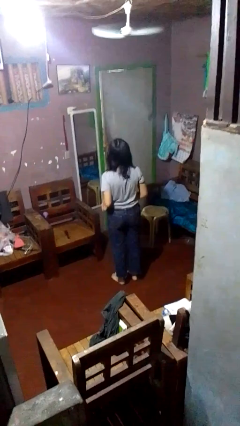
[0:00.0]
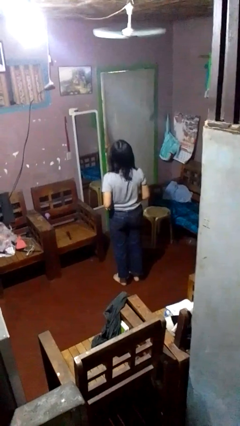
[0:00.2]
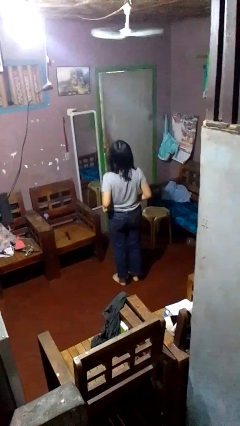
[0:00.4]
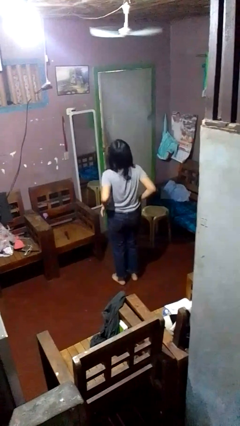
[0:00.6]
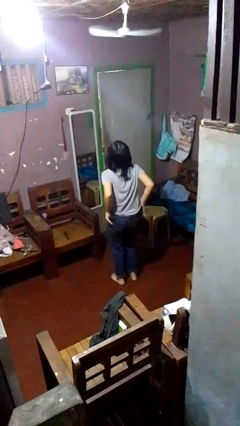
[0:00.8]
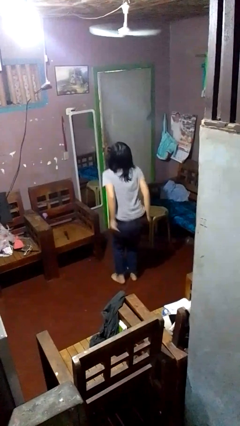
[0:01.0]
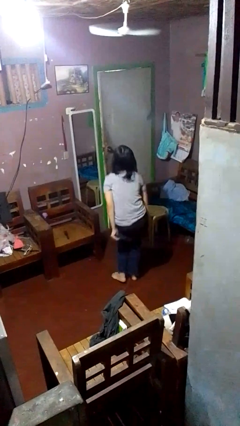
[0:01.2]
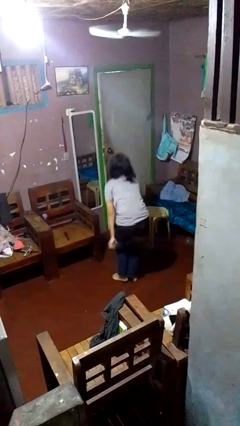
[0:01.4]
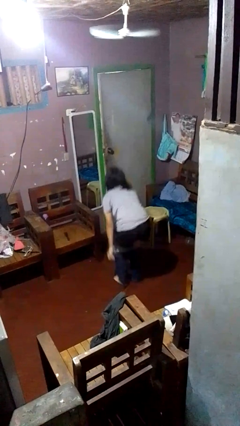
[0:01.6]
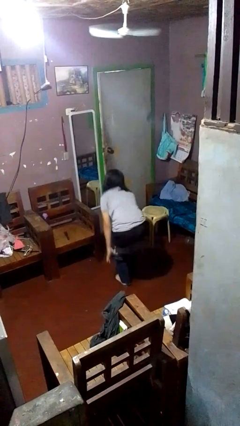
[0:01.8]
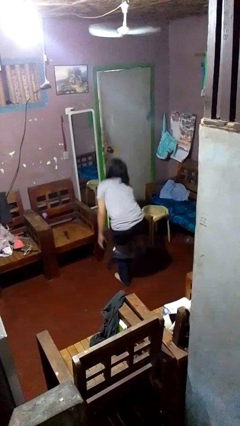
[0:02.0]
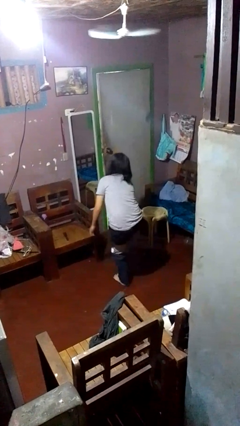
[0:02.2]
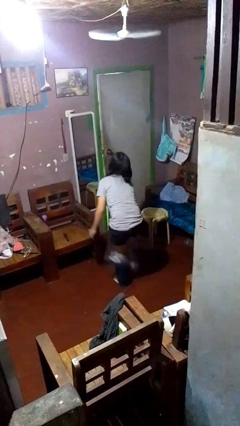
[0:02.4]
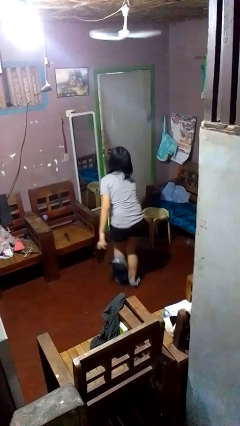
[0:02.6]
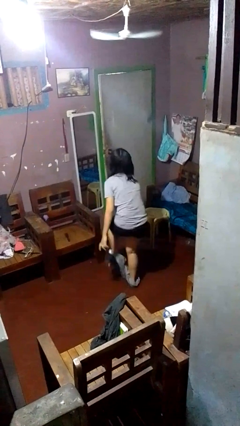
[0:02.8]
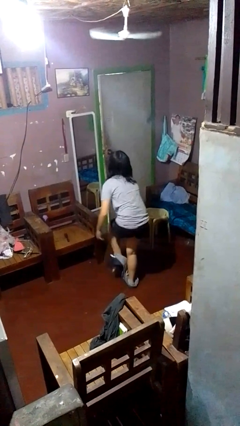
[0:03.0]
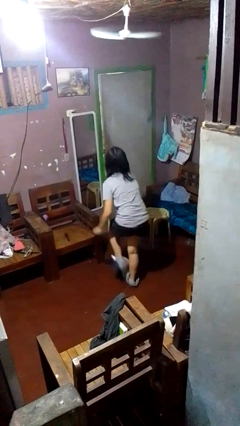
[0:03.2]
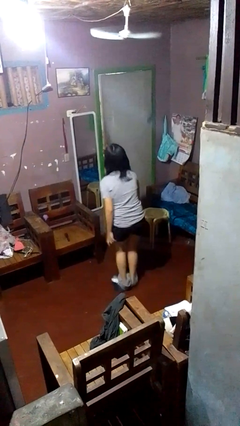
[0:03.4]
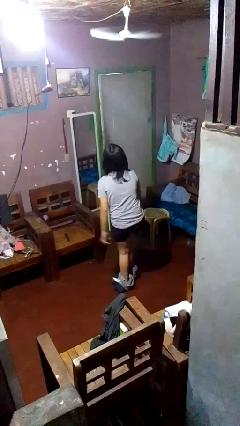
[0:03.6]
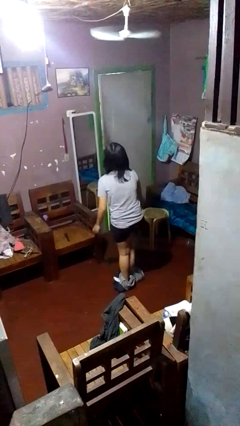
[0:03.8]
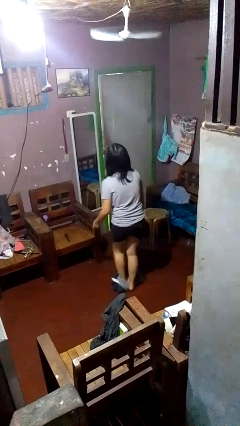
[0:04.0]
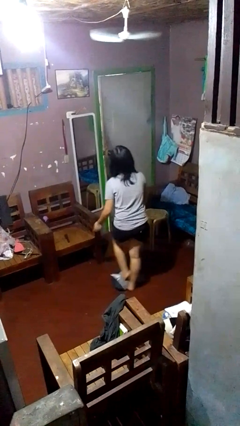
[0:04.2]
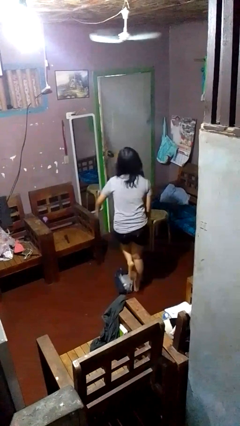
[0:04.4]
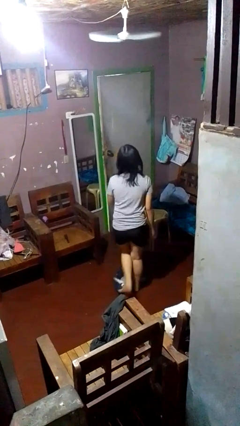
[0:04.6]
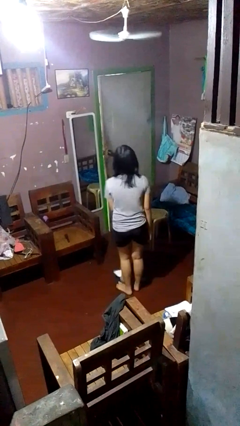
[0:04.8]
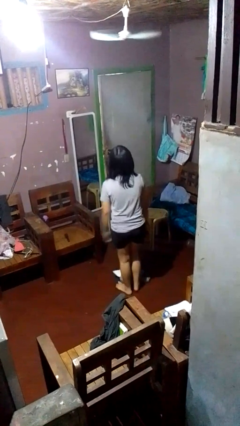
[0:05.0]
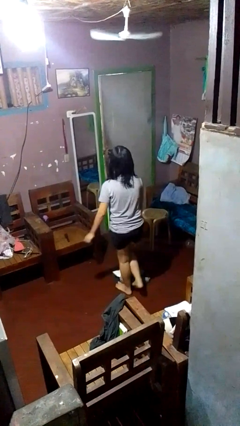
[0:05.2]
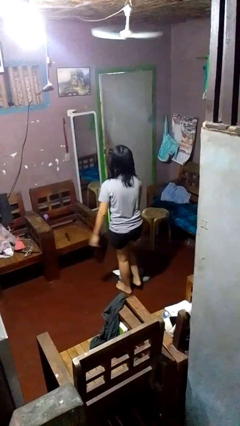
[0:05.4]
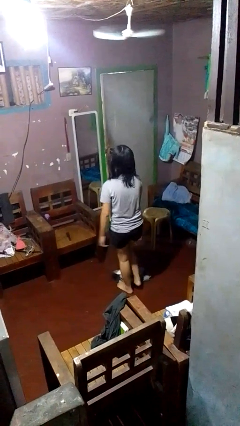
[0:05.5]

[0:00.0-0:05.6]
person takes off pants

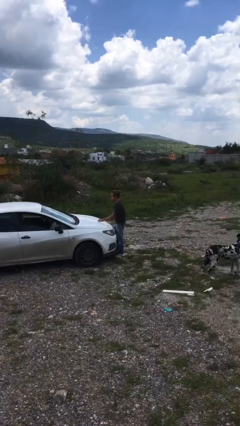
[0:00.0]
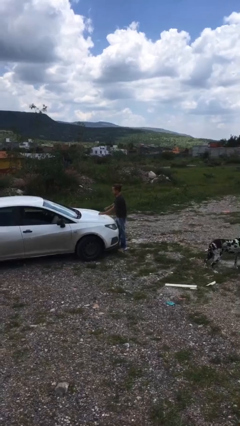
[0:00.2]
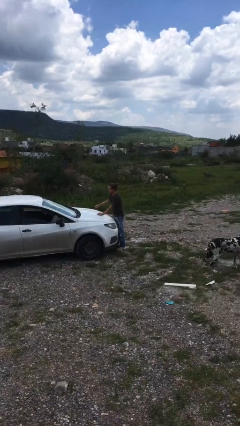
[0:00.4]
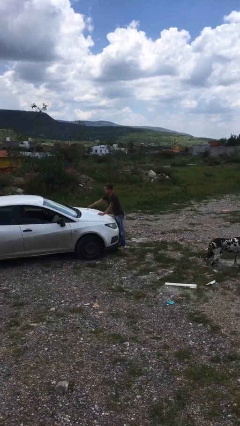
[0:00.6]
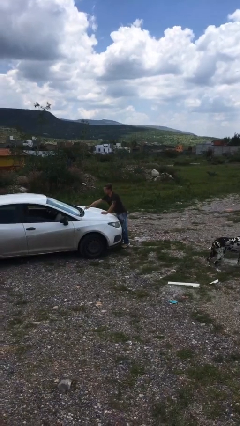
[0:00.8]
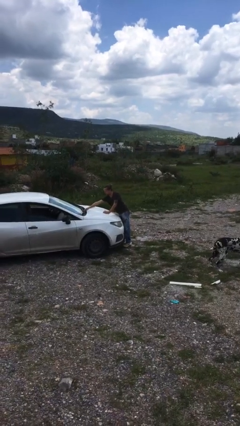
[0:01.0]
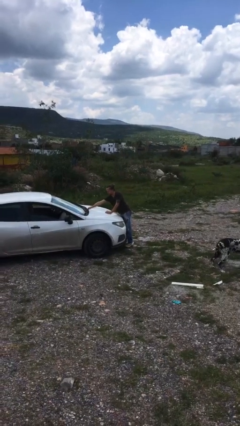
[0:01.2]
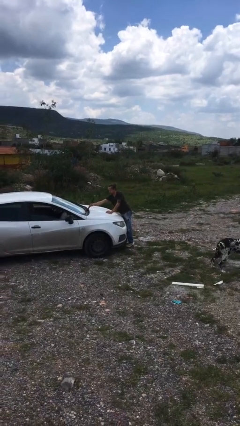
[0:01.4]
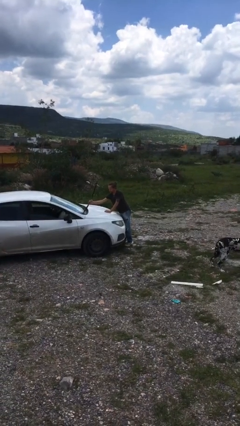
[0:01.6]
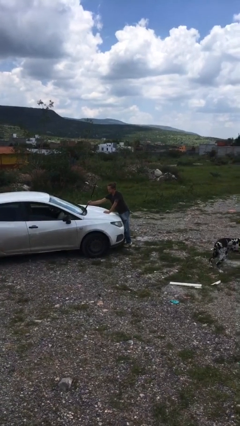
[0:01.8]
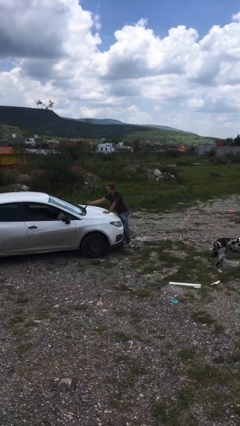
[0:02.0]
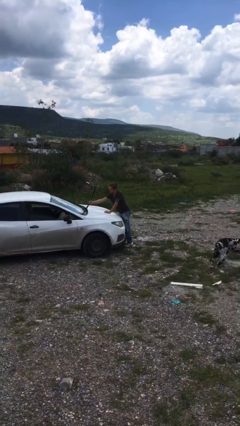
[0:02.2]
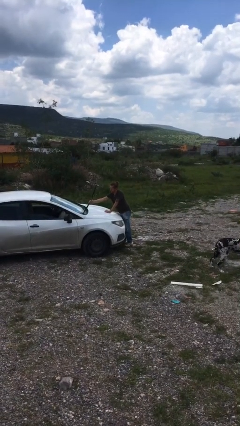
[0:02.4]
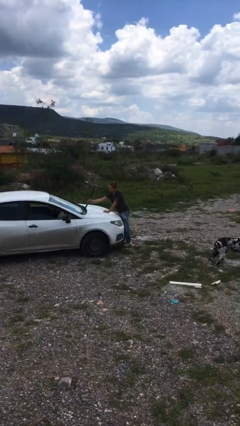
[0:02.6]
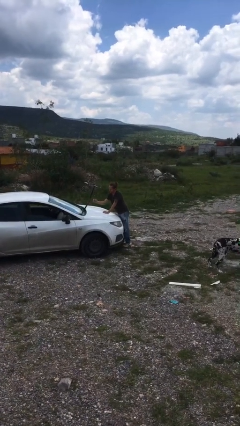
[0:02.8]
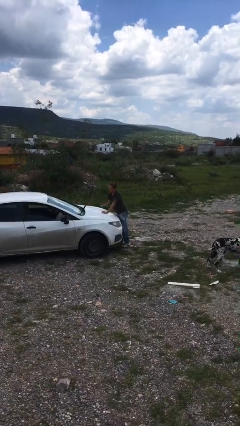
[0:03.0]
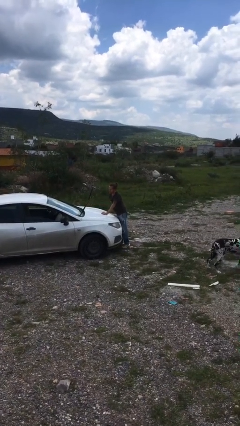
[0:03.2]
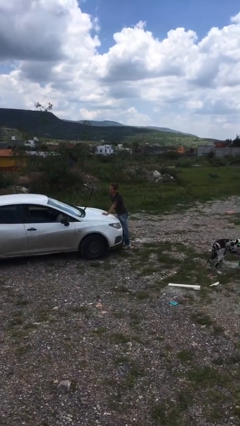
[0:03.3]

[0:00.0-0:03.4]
person flips up car wipers

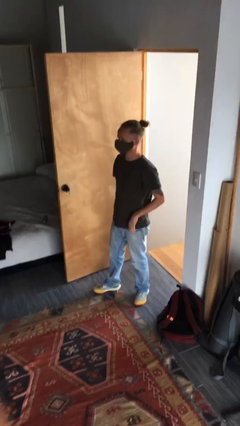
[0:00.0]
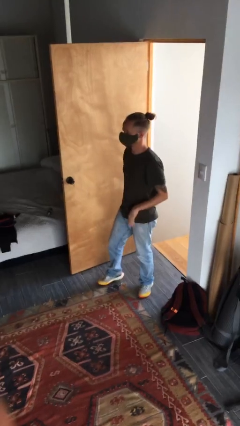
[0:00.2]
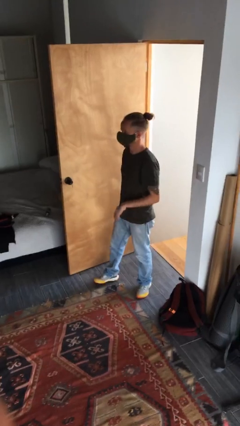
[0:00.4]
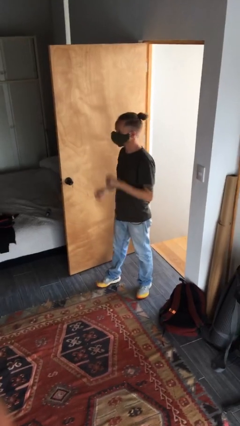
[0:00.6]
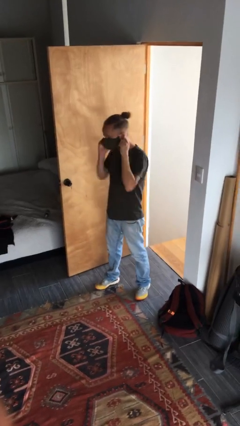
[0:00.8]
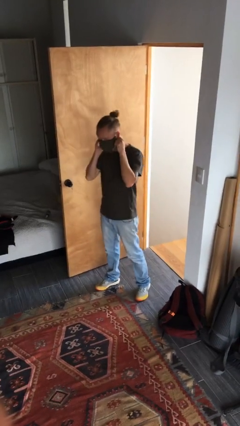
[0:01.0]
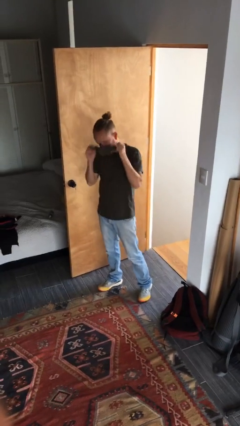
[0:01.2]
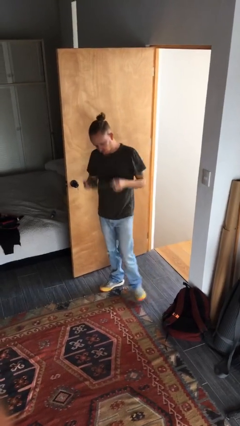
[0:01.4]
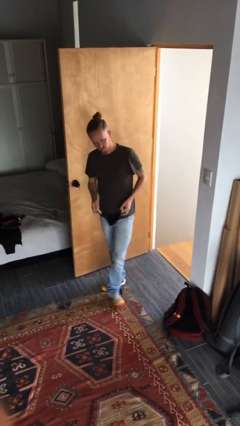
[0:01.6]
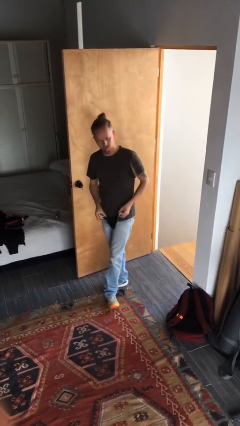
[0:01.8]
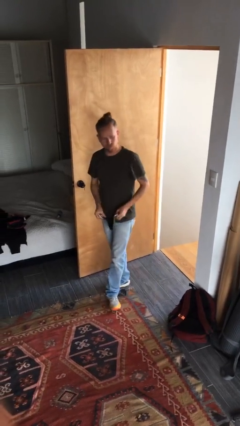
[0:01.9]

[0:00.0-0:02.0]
person takes off facemask

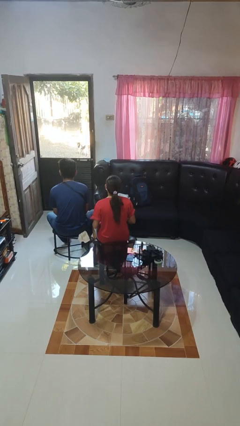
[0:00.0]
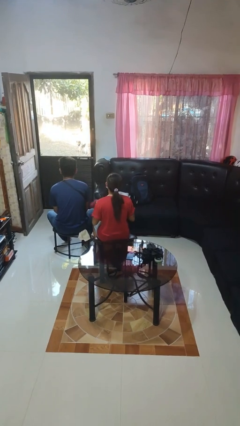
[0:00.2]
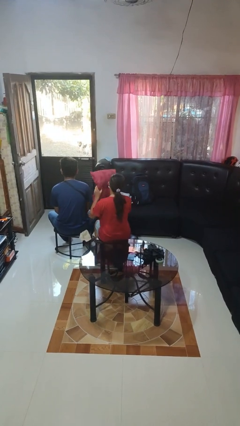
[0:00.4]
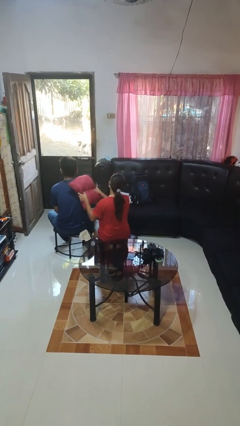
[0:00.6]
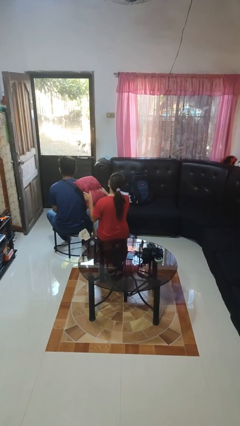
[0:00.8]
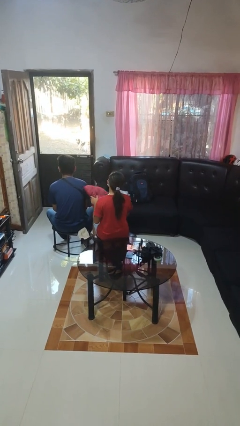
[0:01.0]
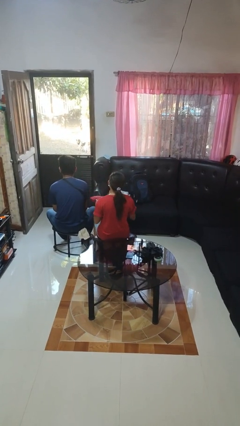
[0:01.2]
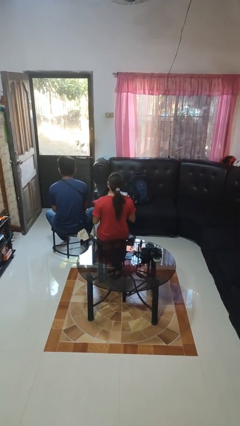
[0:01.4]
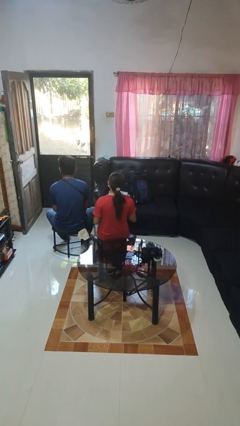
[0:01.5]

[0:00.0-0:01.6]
person hits person with pillow

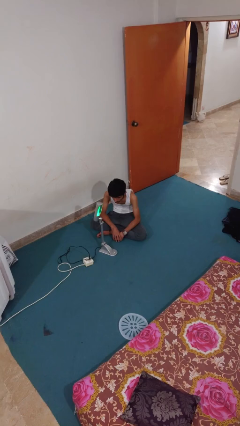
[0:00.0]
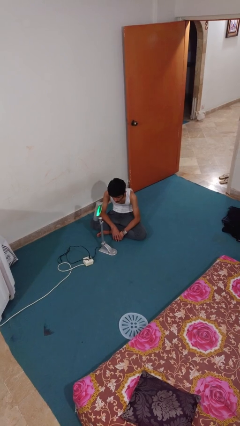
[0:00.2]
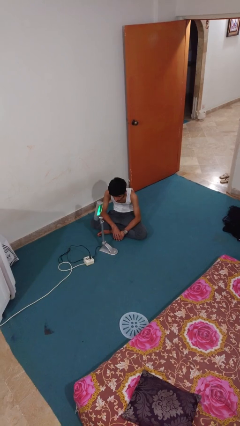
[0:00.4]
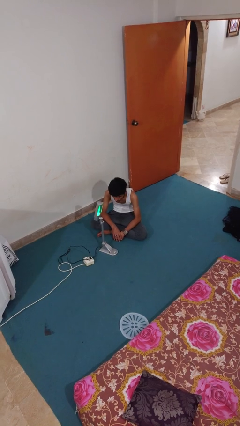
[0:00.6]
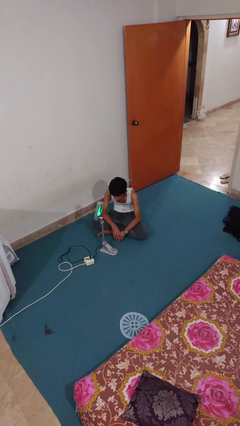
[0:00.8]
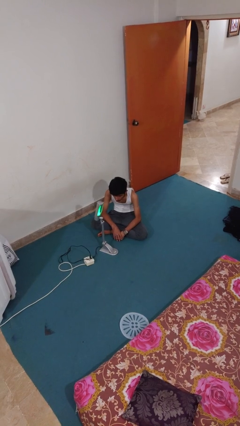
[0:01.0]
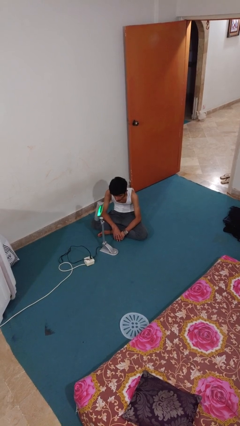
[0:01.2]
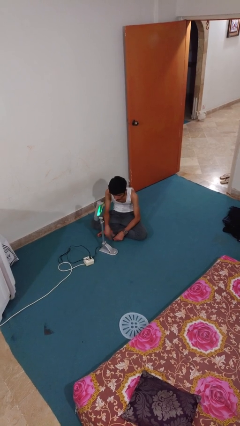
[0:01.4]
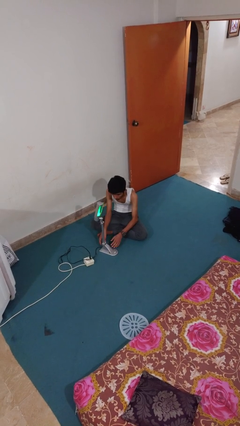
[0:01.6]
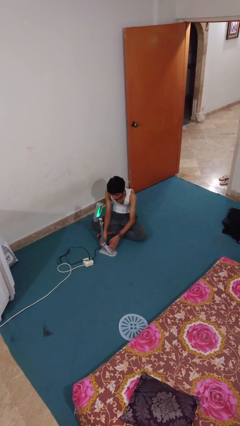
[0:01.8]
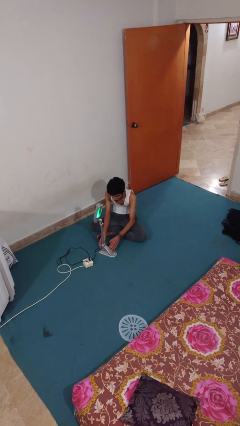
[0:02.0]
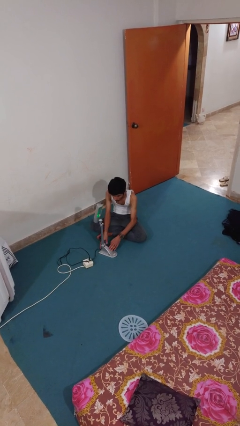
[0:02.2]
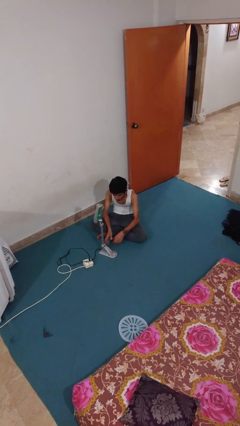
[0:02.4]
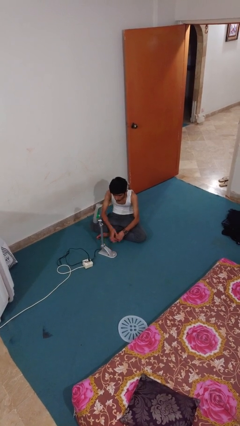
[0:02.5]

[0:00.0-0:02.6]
person turns off lamp

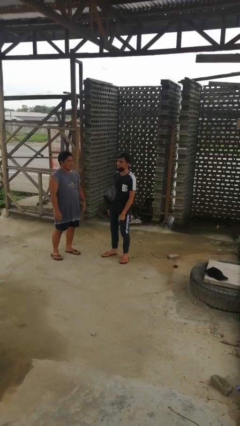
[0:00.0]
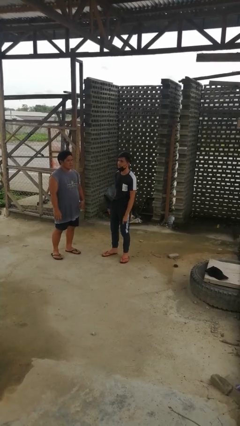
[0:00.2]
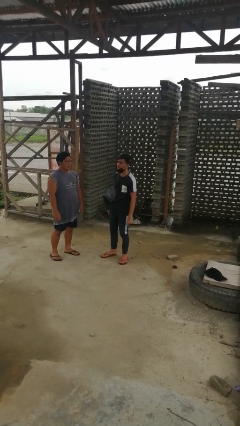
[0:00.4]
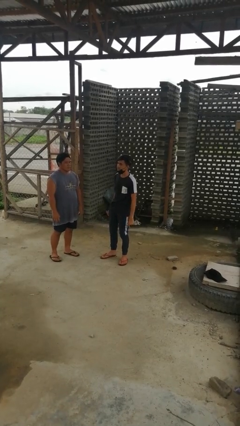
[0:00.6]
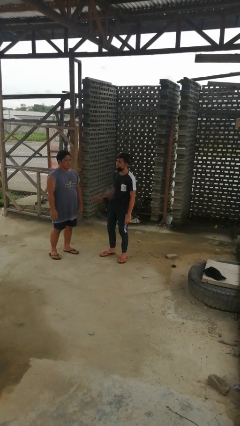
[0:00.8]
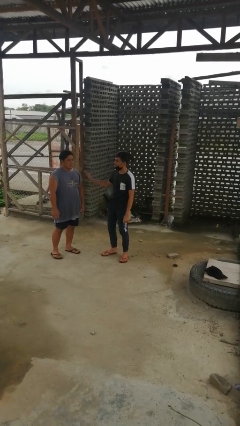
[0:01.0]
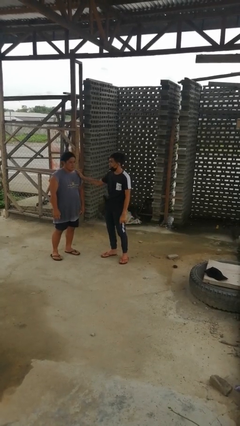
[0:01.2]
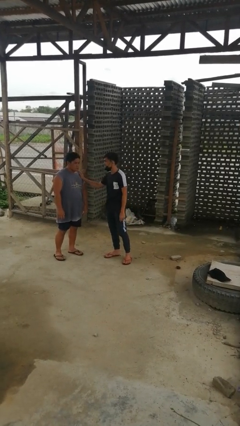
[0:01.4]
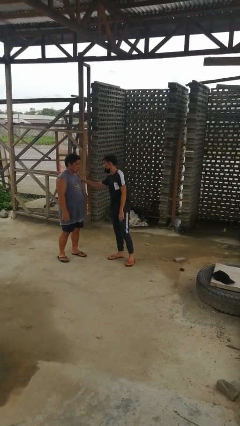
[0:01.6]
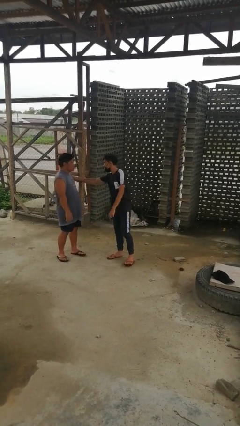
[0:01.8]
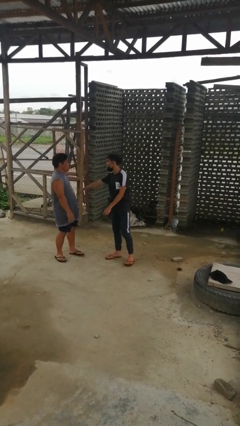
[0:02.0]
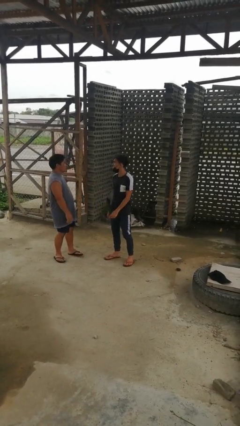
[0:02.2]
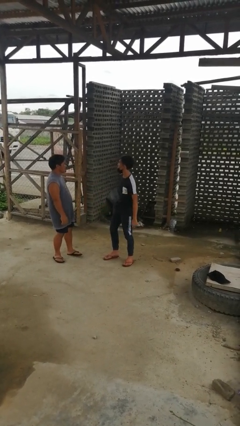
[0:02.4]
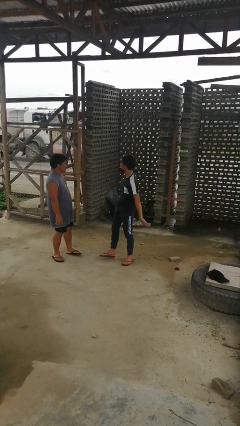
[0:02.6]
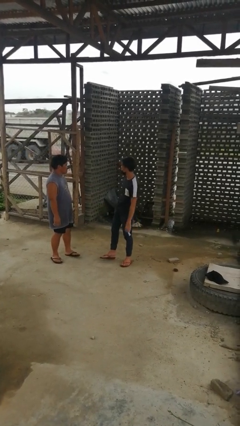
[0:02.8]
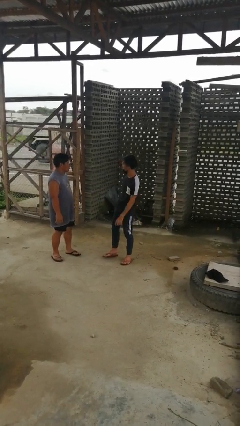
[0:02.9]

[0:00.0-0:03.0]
person shoves person
